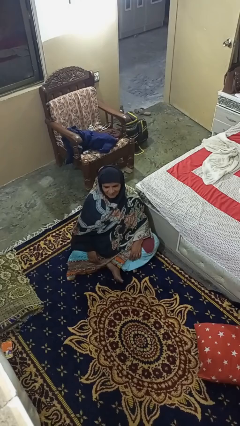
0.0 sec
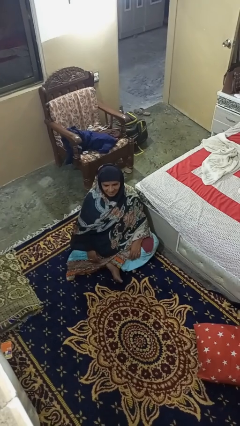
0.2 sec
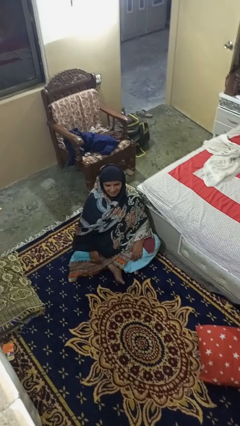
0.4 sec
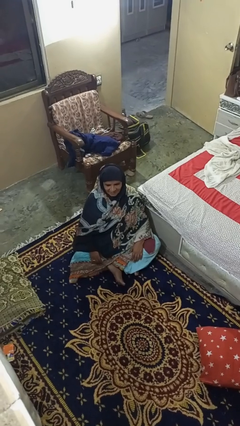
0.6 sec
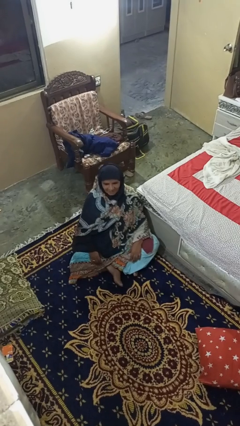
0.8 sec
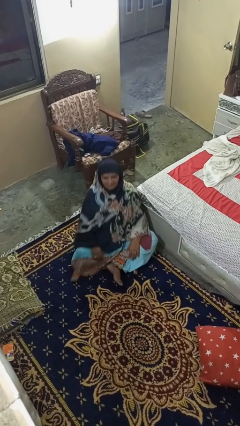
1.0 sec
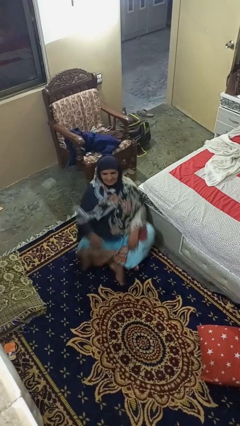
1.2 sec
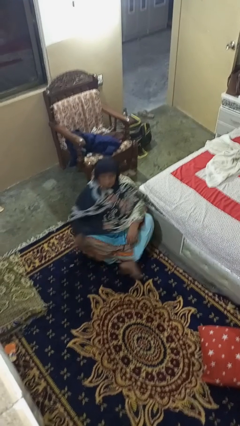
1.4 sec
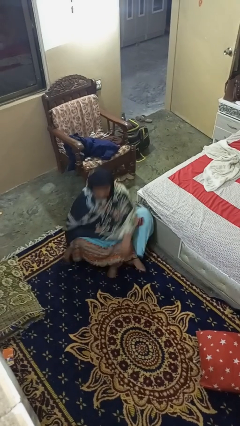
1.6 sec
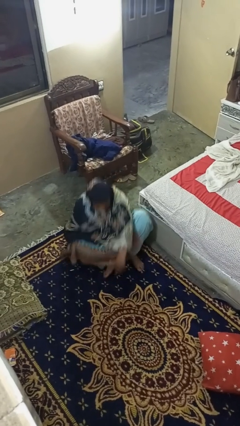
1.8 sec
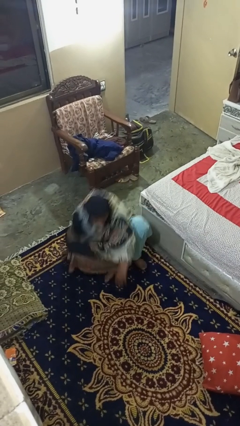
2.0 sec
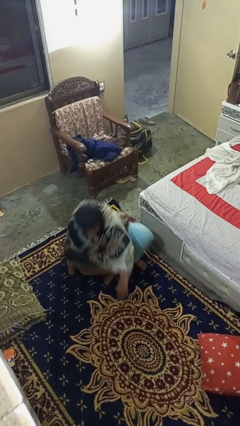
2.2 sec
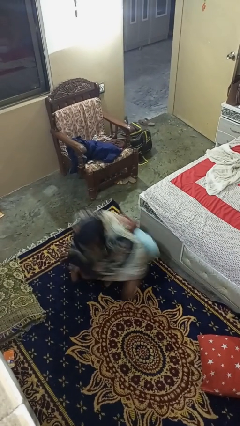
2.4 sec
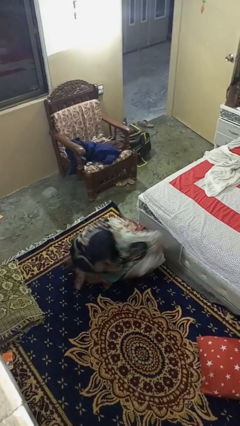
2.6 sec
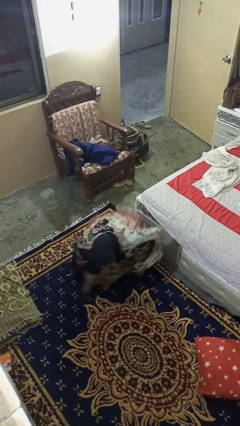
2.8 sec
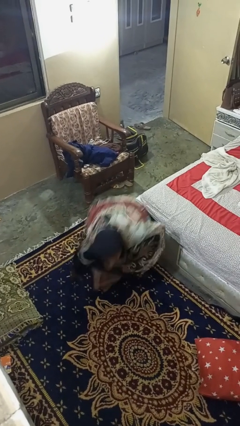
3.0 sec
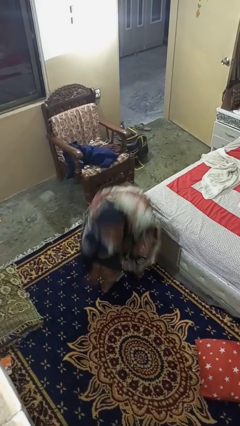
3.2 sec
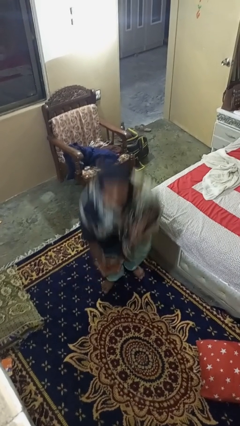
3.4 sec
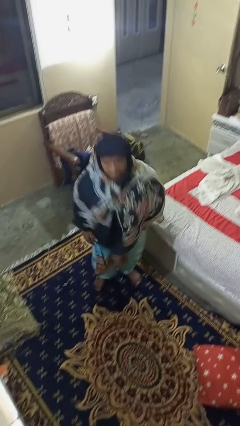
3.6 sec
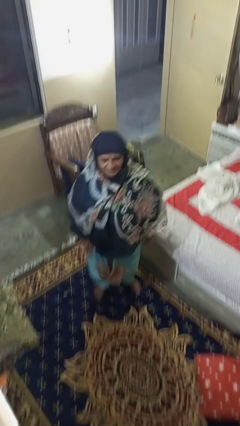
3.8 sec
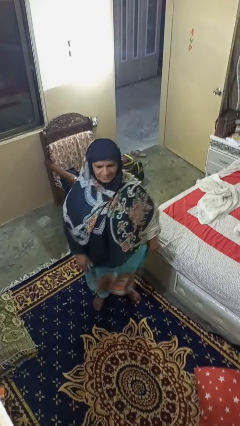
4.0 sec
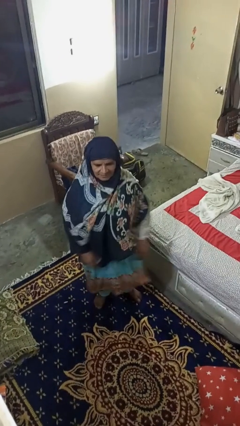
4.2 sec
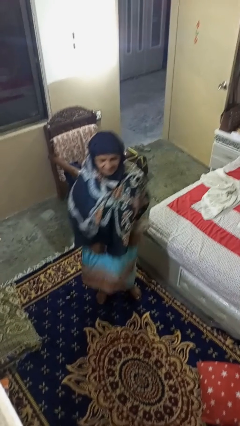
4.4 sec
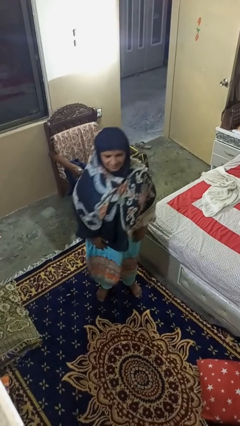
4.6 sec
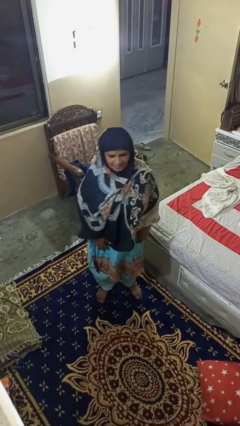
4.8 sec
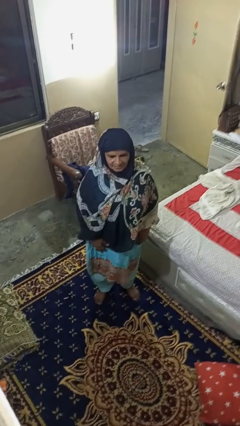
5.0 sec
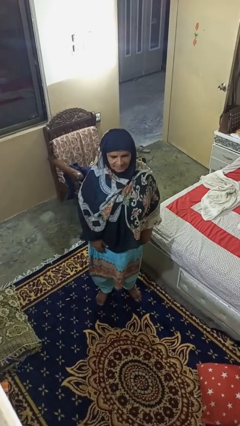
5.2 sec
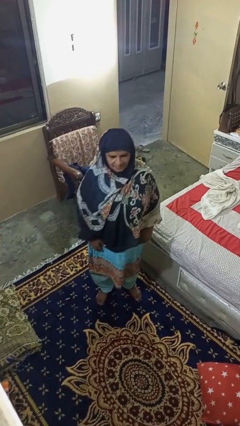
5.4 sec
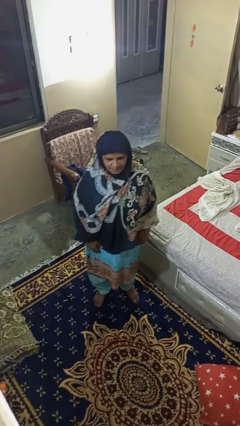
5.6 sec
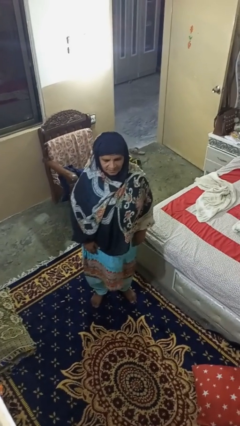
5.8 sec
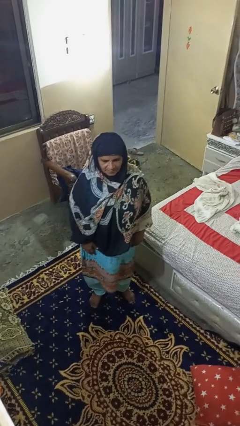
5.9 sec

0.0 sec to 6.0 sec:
person stands up from floor

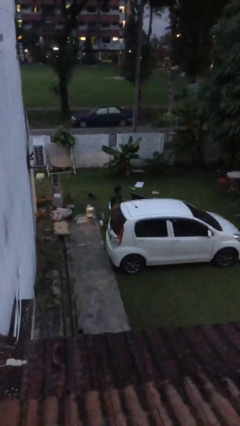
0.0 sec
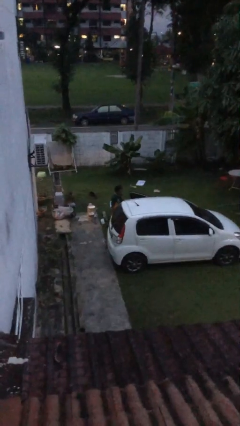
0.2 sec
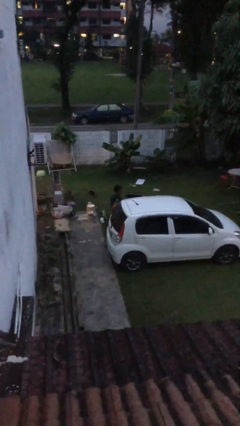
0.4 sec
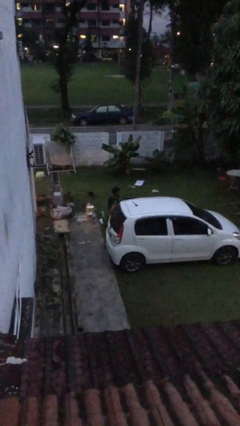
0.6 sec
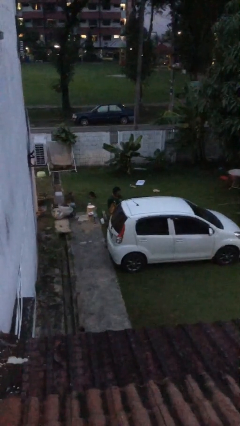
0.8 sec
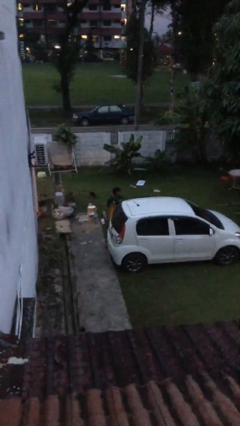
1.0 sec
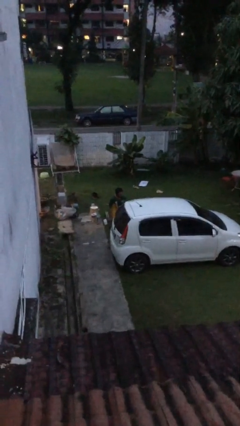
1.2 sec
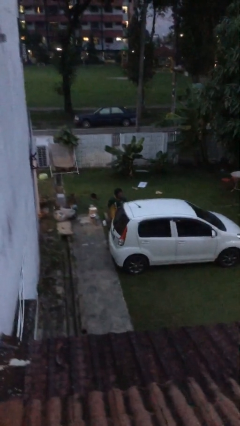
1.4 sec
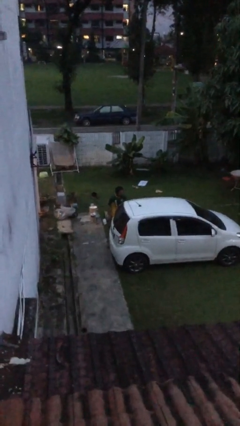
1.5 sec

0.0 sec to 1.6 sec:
person closes car door

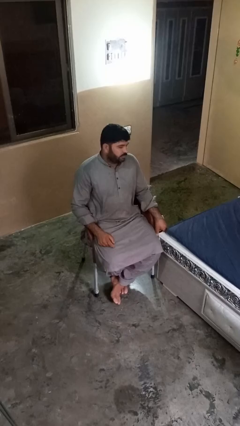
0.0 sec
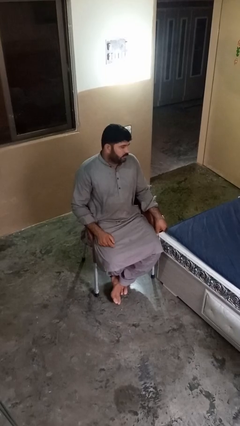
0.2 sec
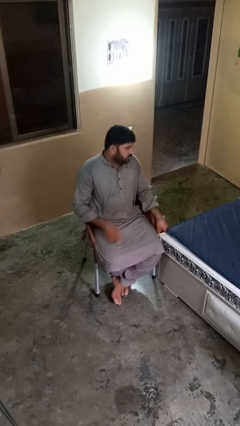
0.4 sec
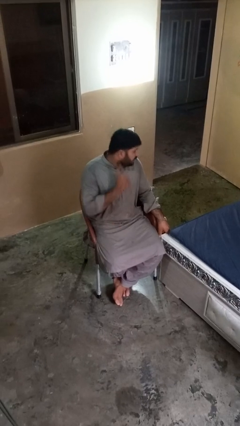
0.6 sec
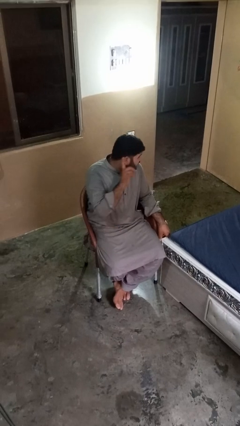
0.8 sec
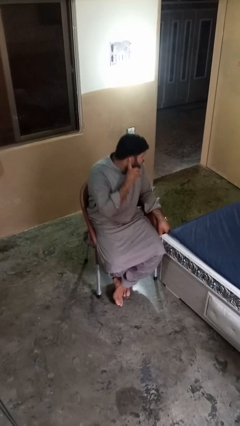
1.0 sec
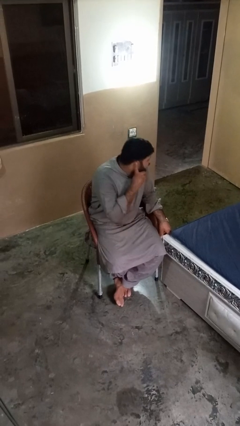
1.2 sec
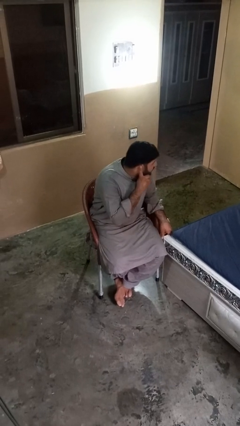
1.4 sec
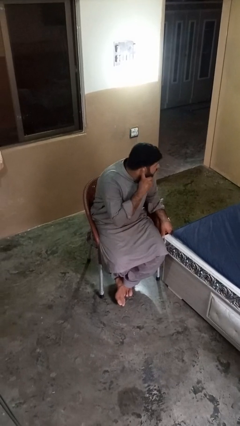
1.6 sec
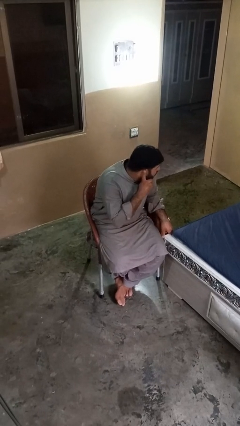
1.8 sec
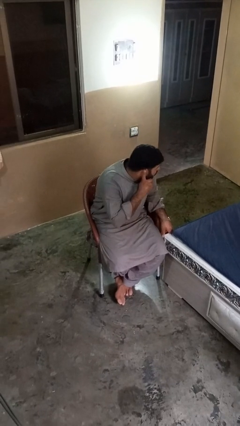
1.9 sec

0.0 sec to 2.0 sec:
person gestures listen closely

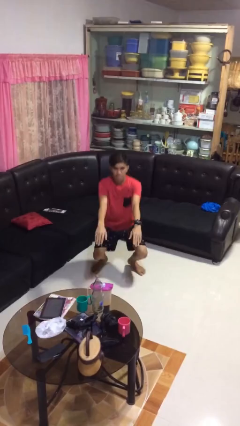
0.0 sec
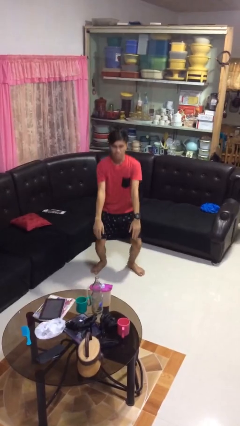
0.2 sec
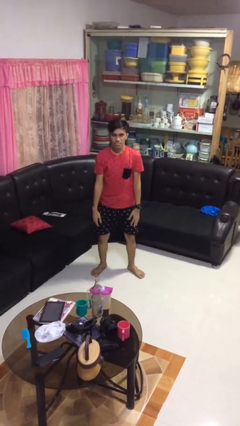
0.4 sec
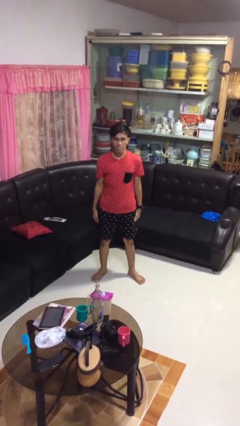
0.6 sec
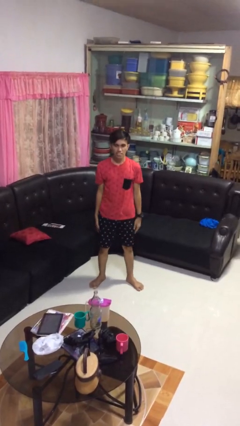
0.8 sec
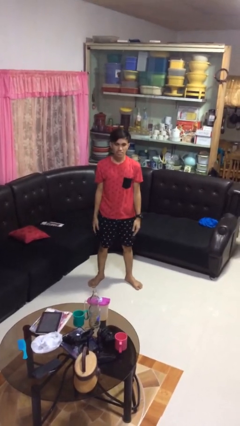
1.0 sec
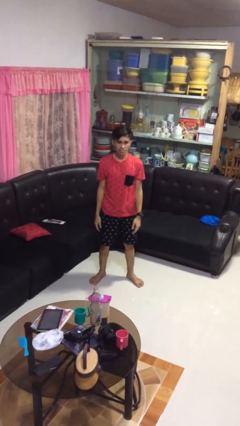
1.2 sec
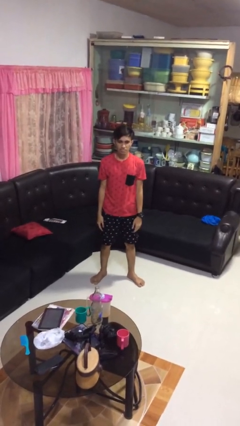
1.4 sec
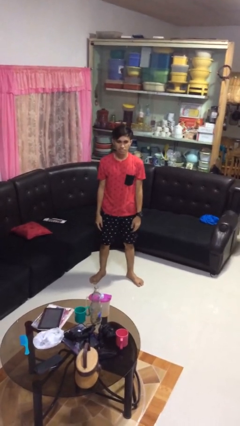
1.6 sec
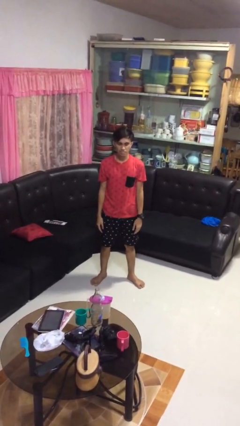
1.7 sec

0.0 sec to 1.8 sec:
person stands up

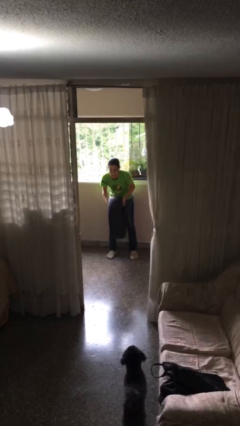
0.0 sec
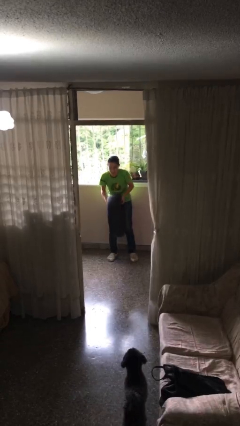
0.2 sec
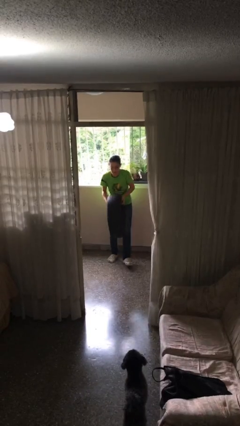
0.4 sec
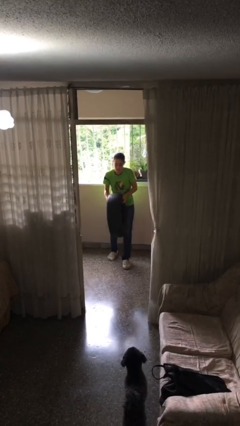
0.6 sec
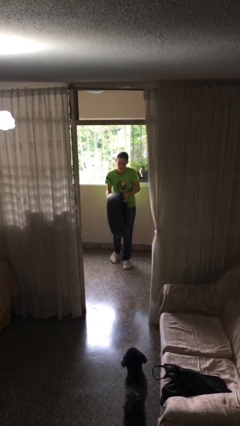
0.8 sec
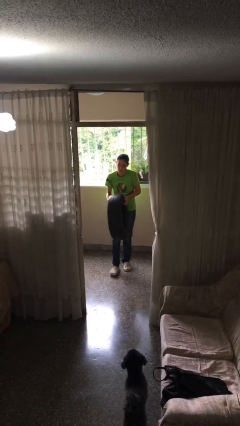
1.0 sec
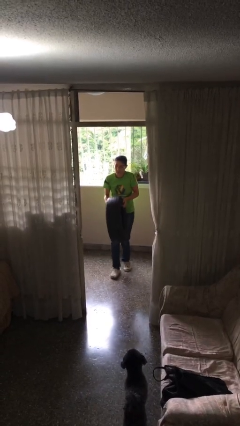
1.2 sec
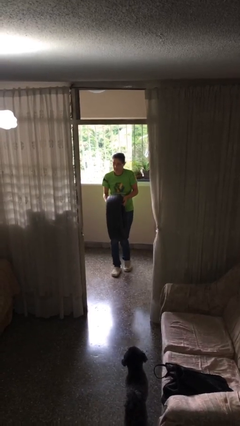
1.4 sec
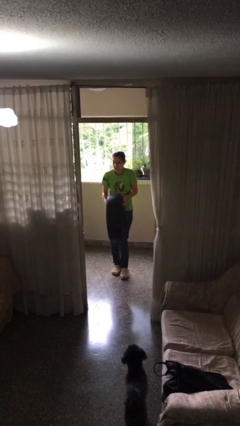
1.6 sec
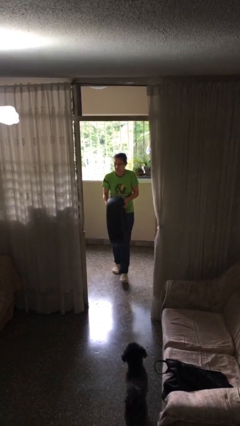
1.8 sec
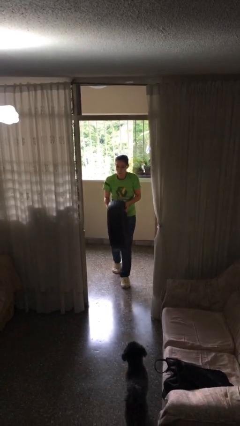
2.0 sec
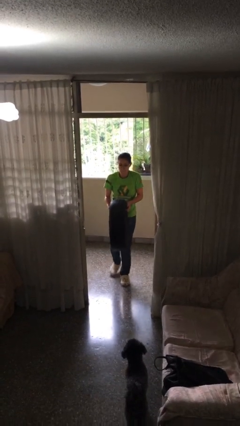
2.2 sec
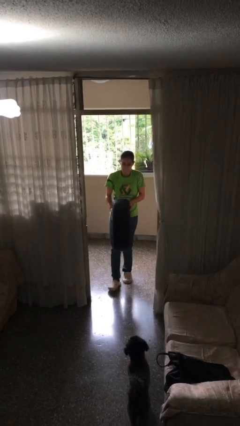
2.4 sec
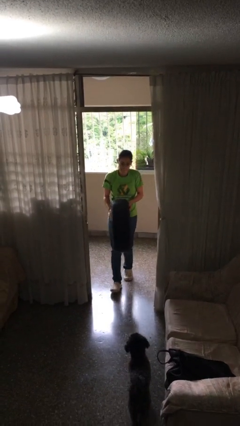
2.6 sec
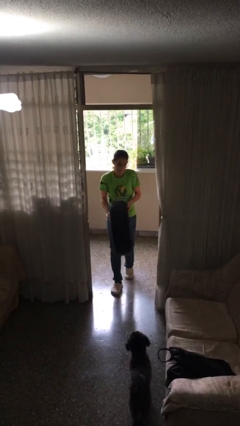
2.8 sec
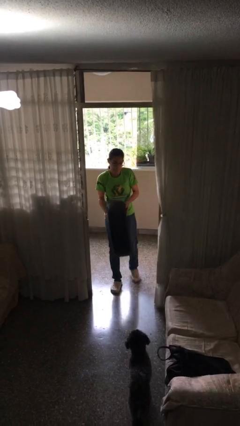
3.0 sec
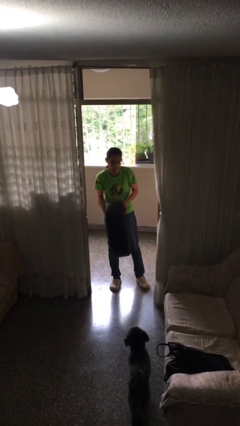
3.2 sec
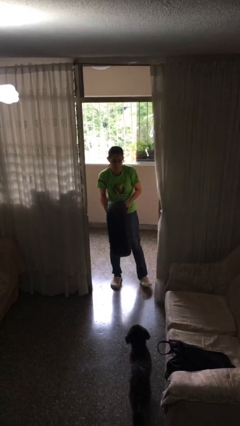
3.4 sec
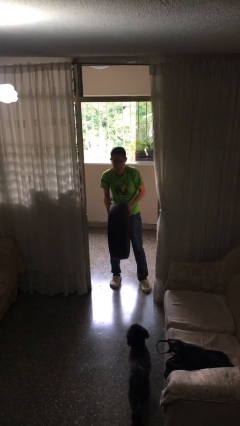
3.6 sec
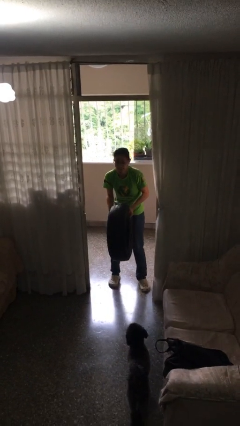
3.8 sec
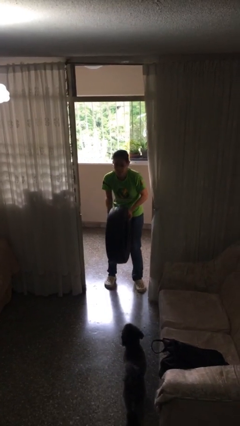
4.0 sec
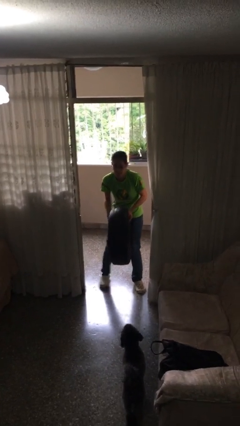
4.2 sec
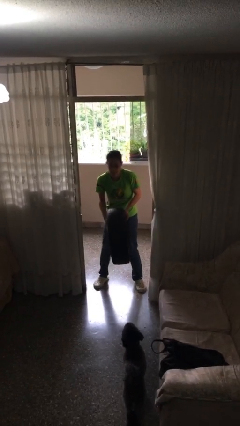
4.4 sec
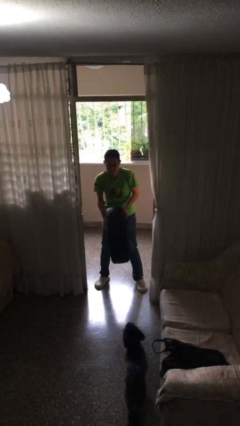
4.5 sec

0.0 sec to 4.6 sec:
person carries heavy object

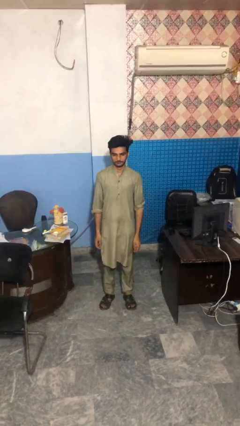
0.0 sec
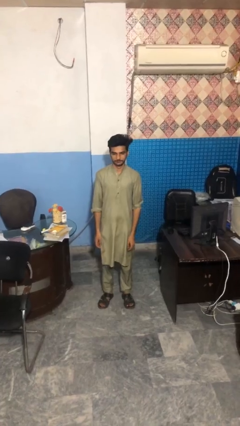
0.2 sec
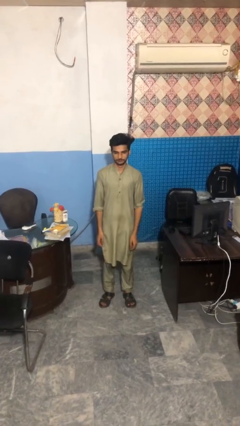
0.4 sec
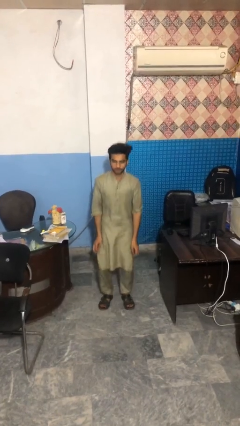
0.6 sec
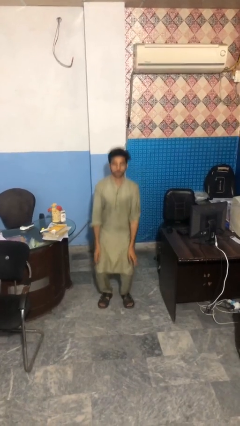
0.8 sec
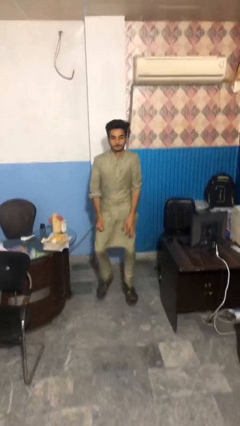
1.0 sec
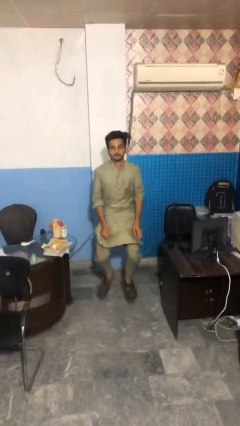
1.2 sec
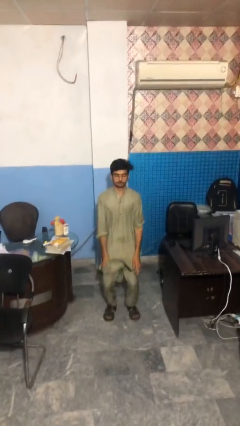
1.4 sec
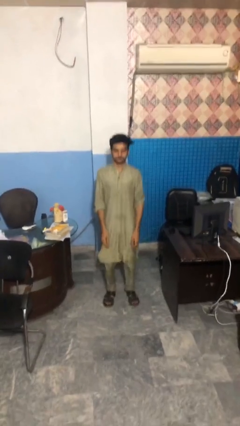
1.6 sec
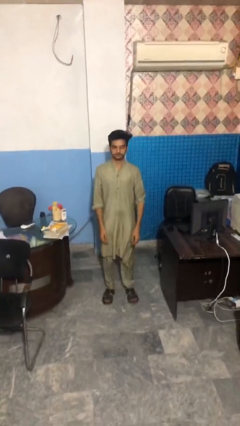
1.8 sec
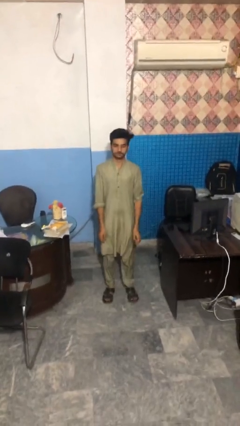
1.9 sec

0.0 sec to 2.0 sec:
person jumps
